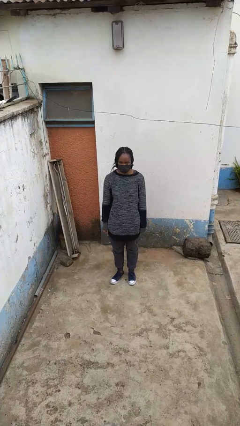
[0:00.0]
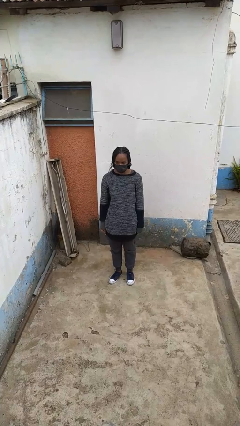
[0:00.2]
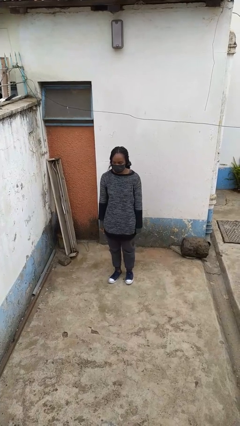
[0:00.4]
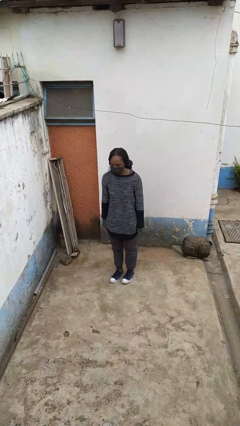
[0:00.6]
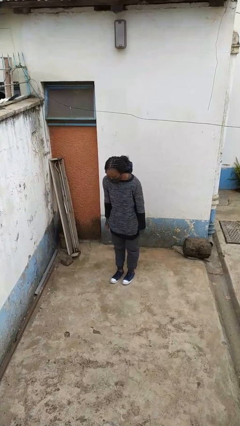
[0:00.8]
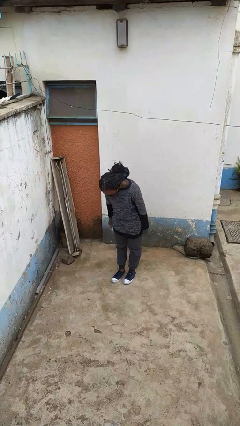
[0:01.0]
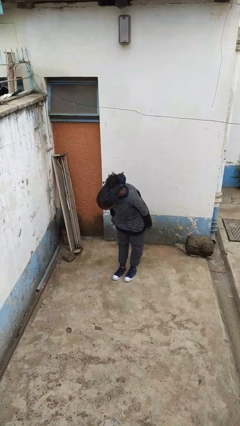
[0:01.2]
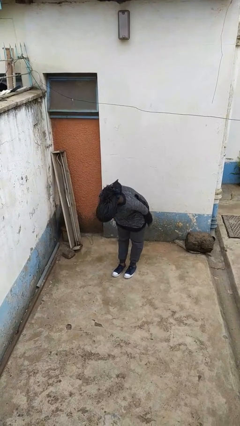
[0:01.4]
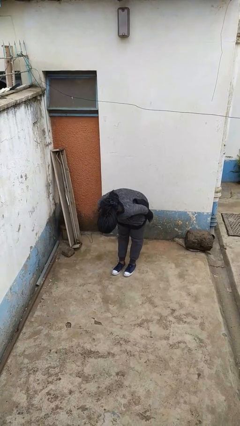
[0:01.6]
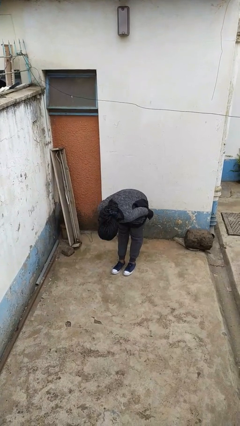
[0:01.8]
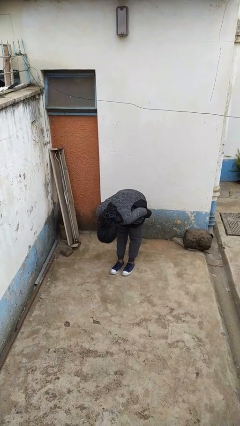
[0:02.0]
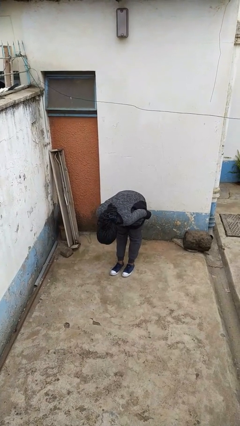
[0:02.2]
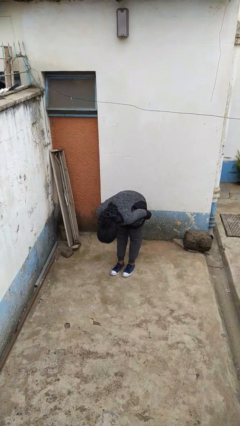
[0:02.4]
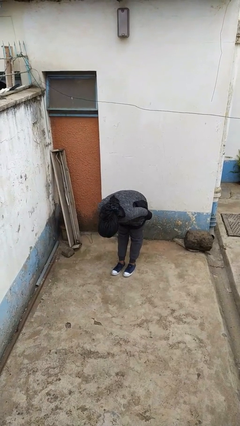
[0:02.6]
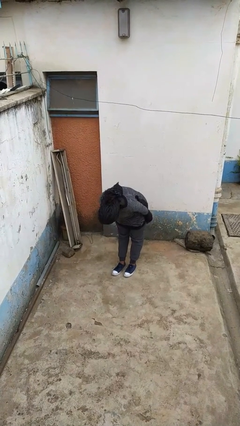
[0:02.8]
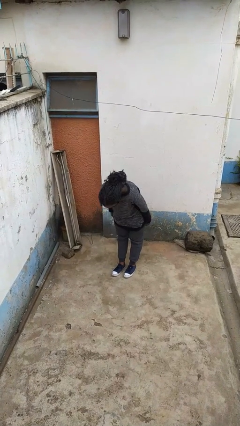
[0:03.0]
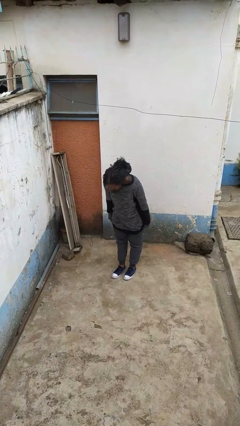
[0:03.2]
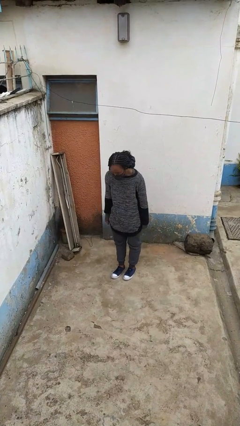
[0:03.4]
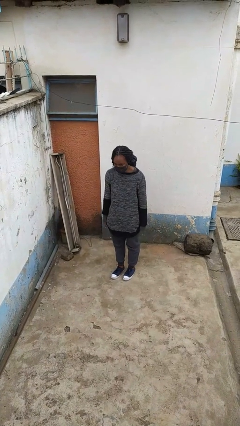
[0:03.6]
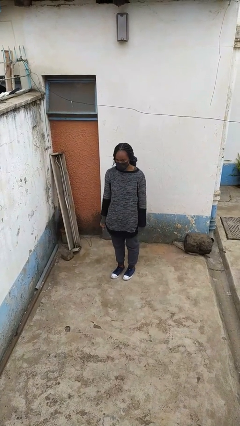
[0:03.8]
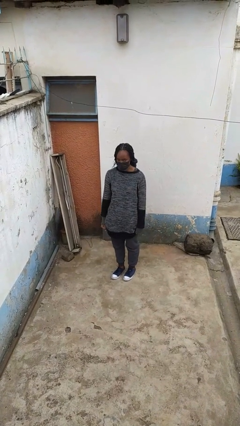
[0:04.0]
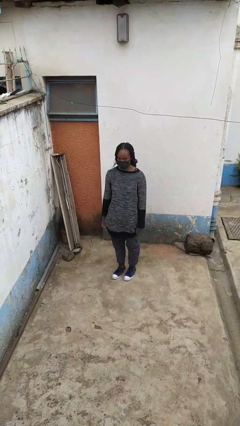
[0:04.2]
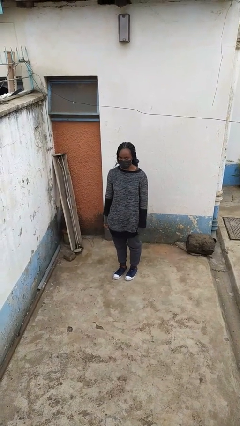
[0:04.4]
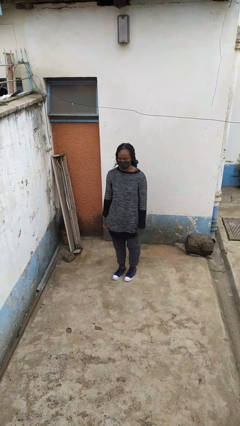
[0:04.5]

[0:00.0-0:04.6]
person bows

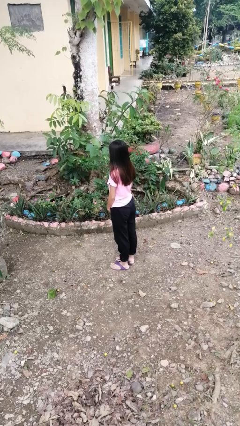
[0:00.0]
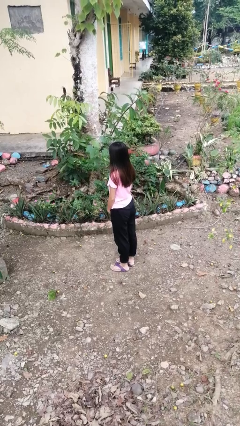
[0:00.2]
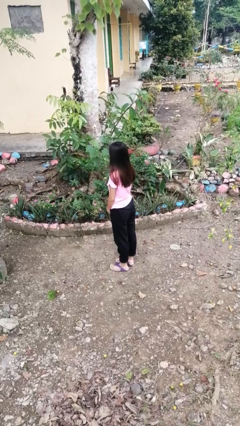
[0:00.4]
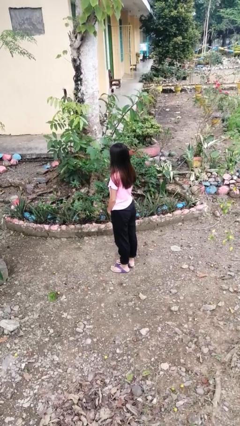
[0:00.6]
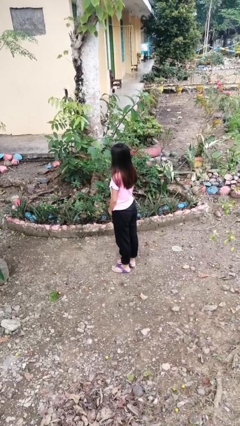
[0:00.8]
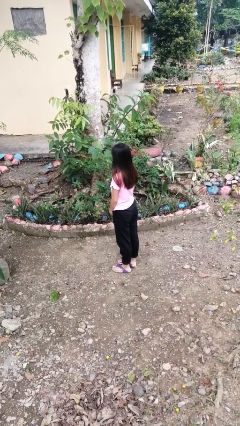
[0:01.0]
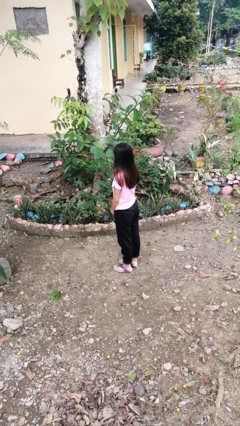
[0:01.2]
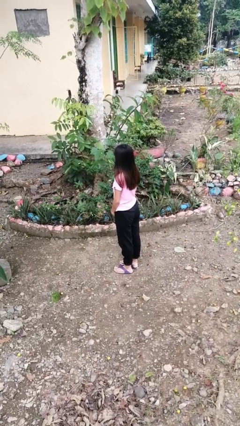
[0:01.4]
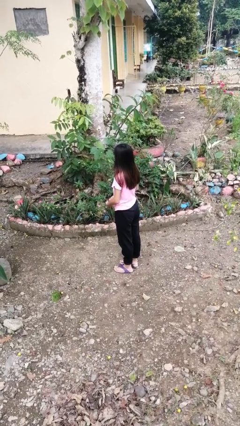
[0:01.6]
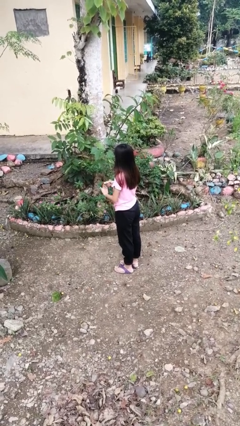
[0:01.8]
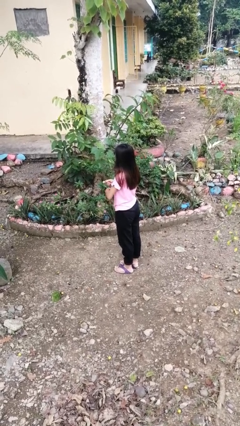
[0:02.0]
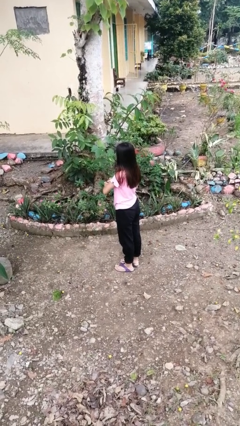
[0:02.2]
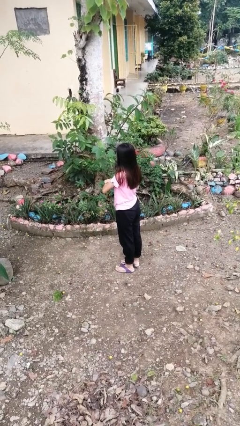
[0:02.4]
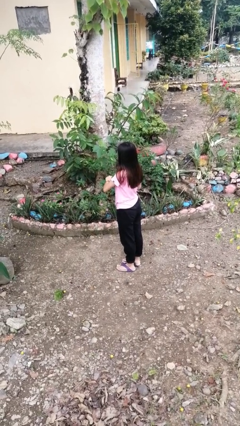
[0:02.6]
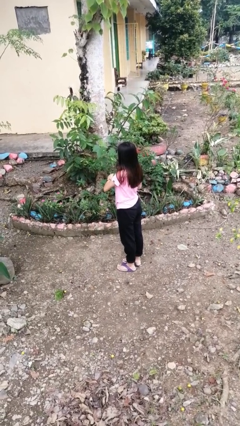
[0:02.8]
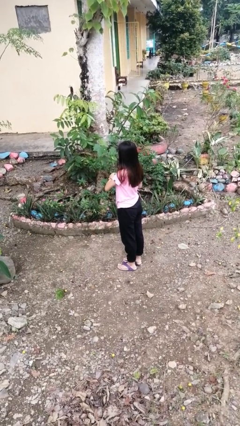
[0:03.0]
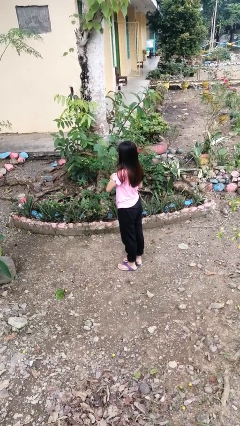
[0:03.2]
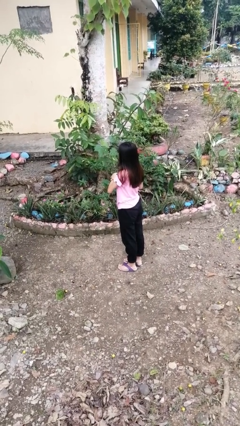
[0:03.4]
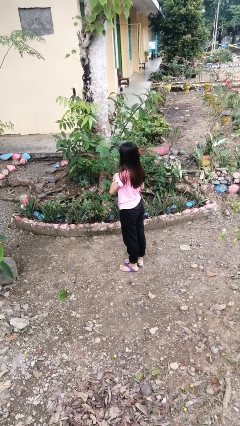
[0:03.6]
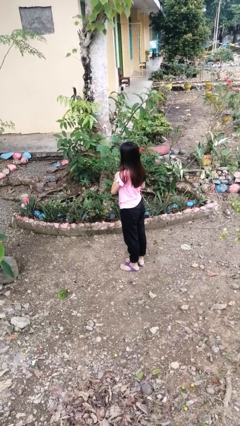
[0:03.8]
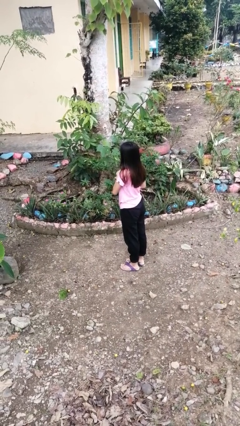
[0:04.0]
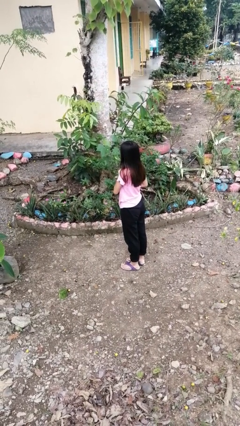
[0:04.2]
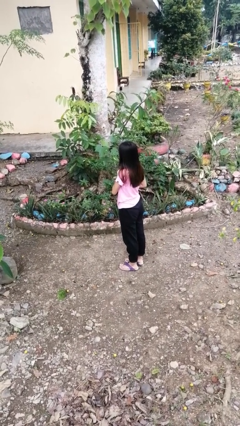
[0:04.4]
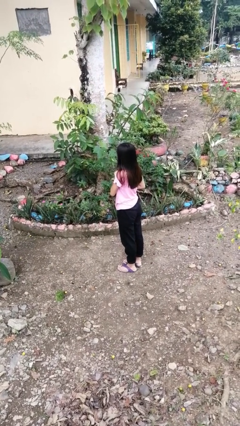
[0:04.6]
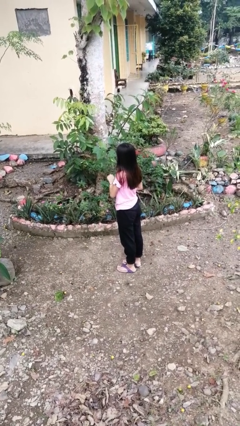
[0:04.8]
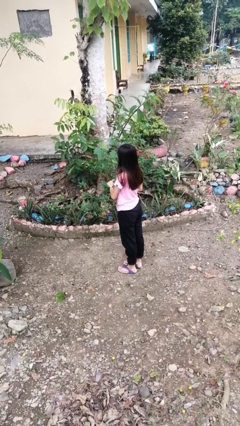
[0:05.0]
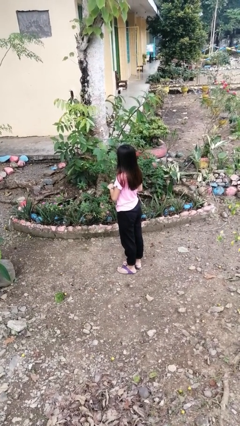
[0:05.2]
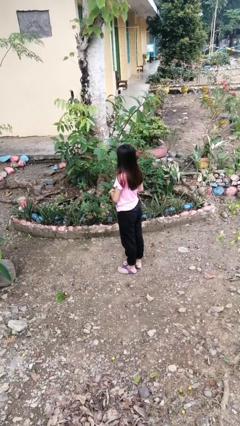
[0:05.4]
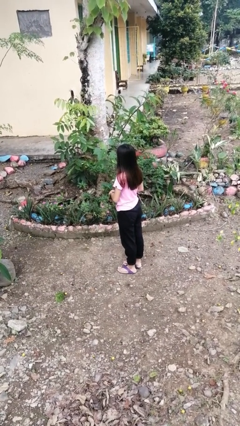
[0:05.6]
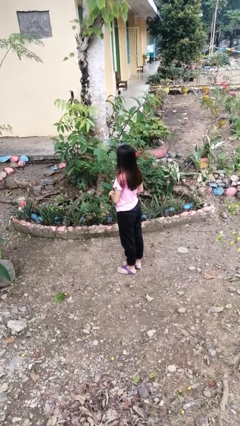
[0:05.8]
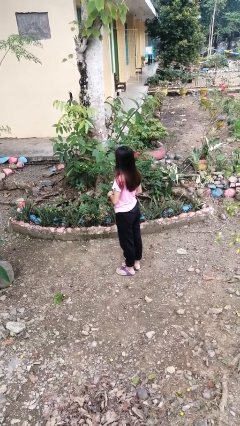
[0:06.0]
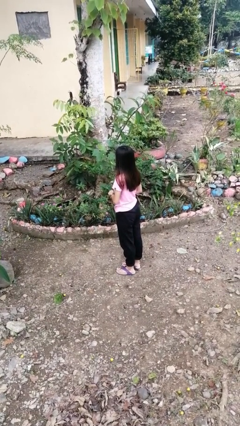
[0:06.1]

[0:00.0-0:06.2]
person puts on wristwatch

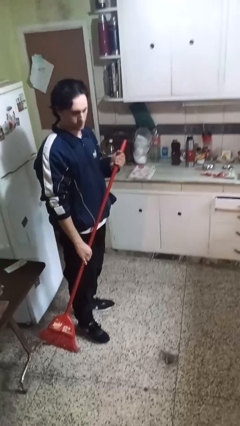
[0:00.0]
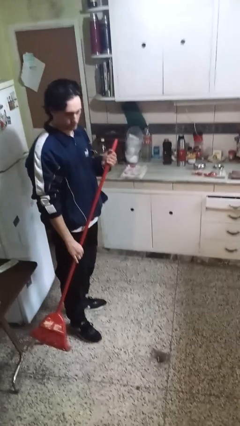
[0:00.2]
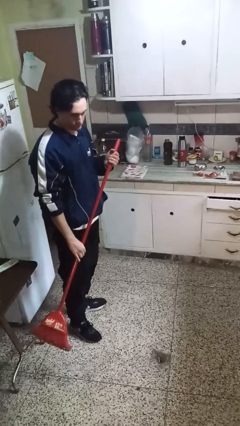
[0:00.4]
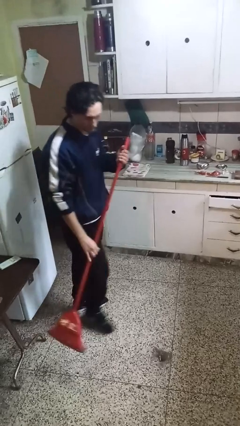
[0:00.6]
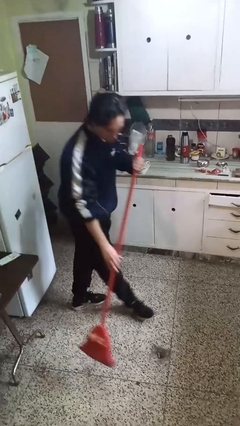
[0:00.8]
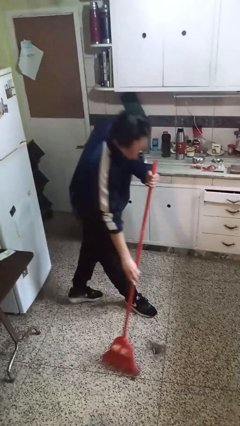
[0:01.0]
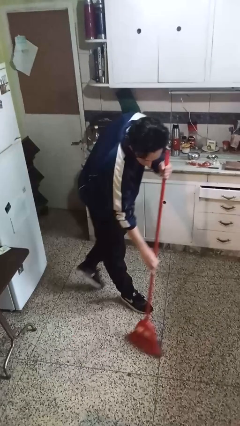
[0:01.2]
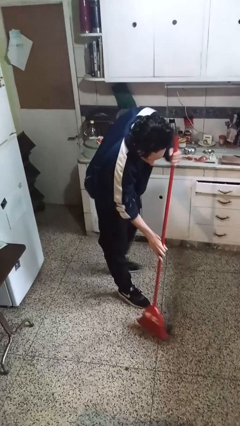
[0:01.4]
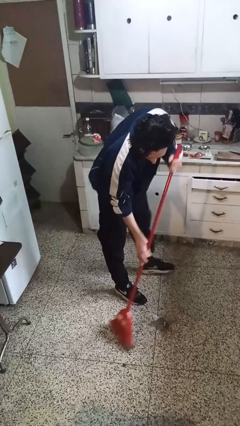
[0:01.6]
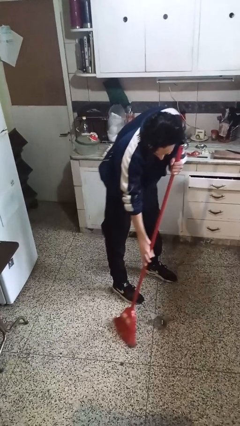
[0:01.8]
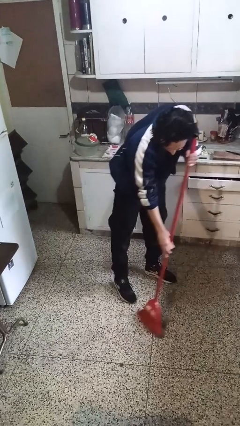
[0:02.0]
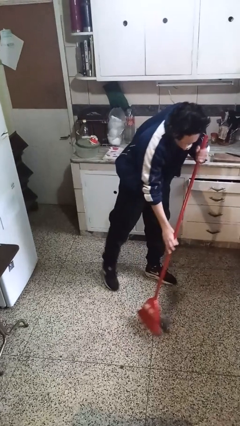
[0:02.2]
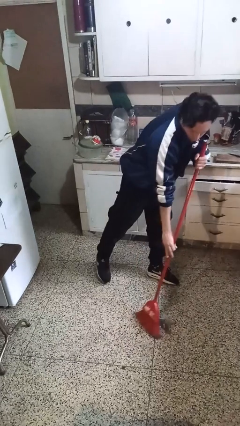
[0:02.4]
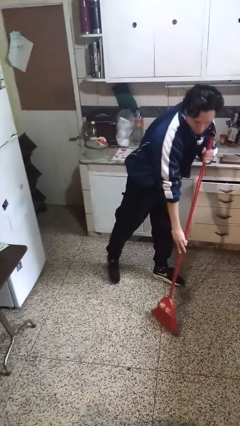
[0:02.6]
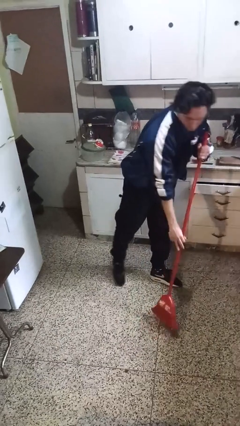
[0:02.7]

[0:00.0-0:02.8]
person sweeps floor

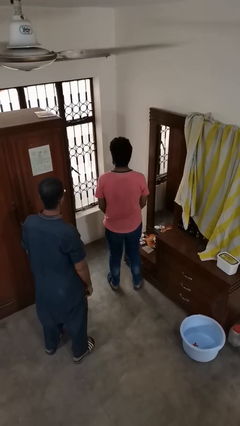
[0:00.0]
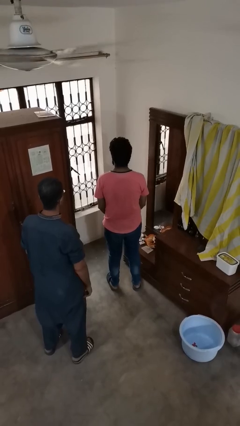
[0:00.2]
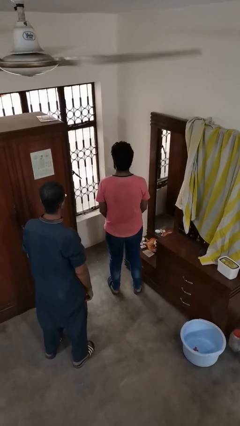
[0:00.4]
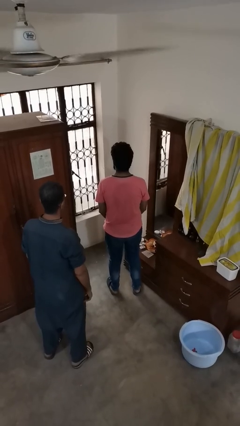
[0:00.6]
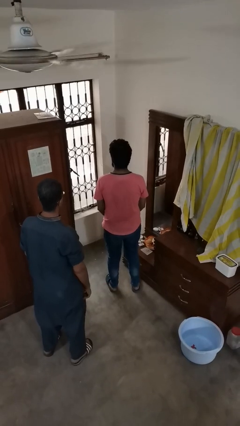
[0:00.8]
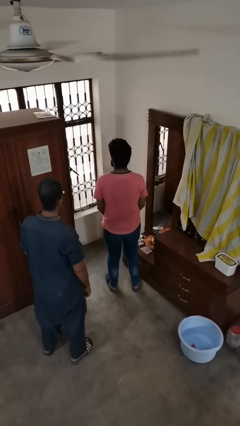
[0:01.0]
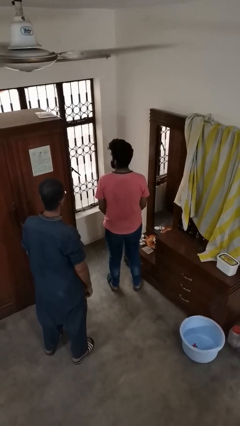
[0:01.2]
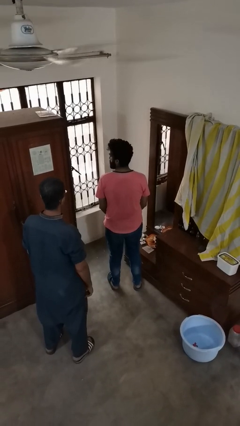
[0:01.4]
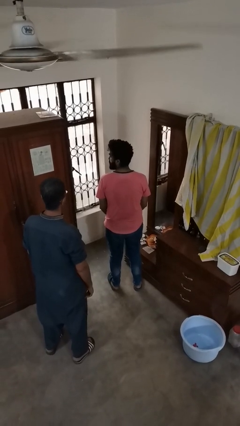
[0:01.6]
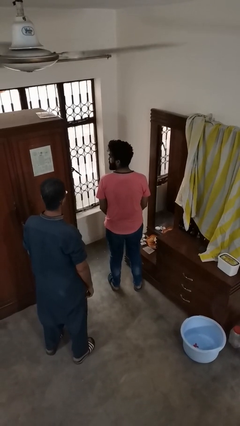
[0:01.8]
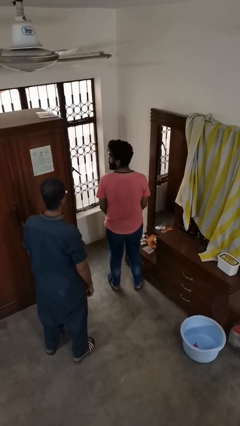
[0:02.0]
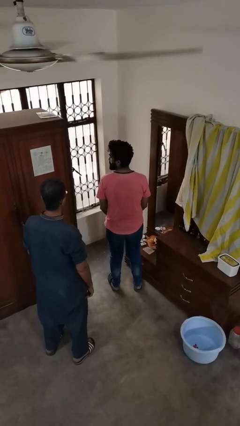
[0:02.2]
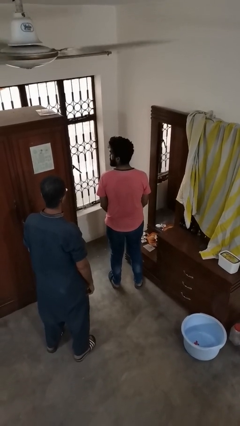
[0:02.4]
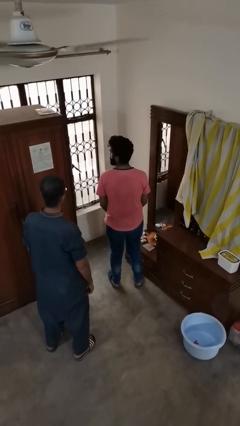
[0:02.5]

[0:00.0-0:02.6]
person looks over shoulder

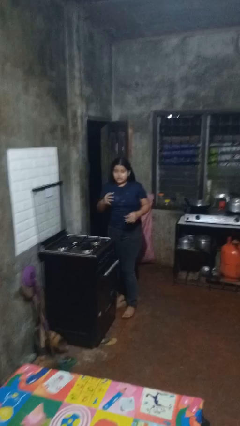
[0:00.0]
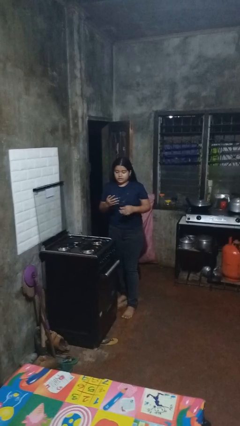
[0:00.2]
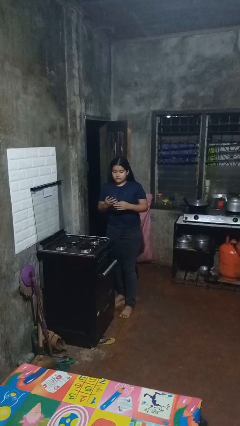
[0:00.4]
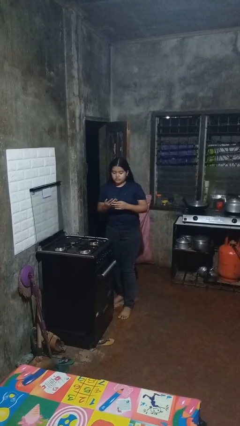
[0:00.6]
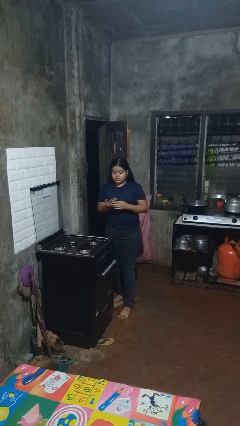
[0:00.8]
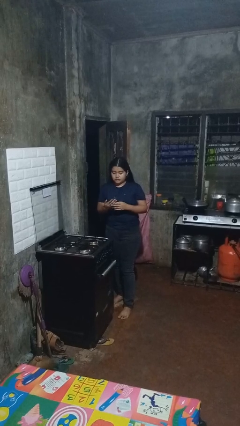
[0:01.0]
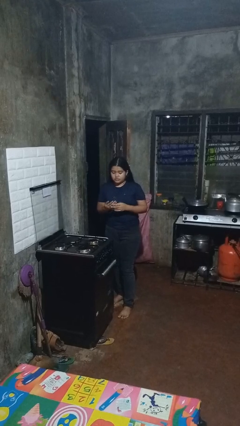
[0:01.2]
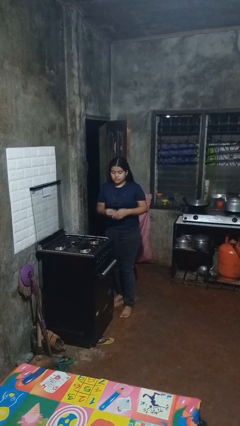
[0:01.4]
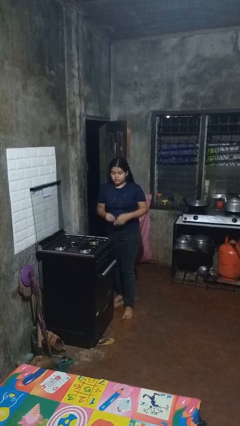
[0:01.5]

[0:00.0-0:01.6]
person burns hand
